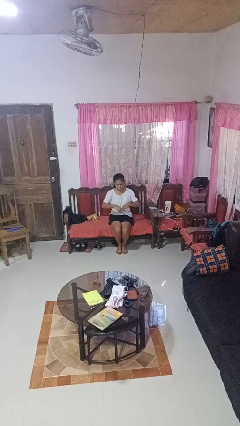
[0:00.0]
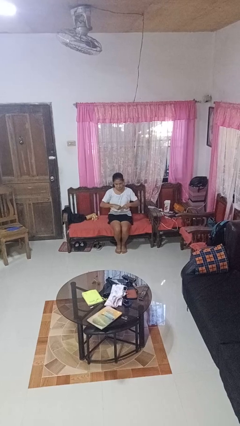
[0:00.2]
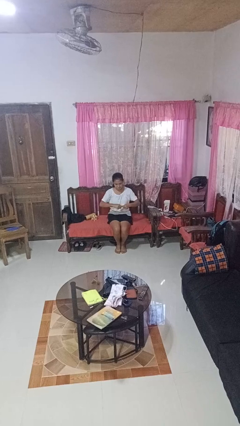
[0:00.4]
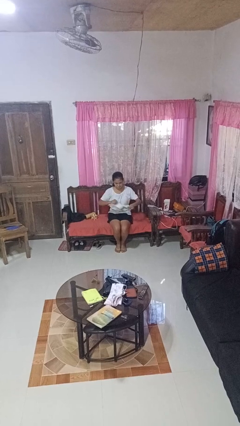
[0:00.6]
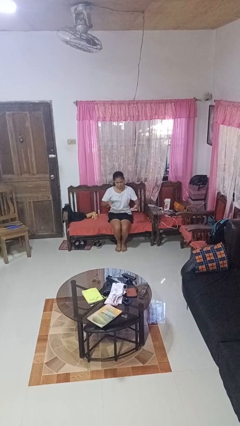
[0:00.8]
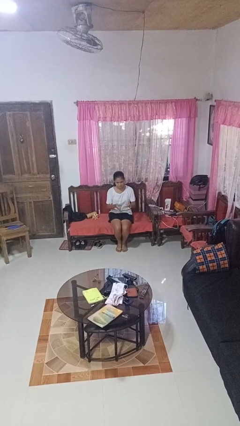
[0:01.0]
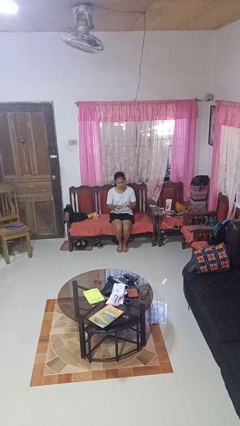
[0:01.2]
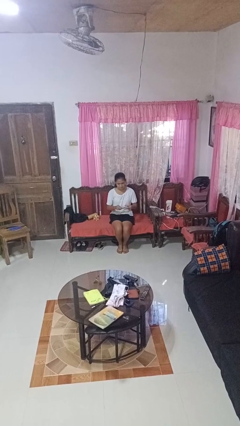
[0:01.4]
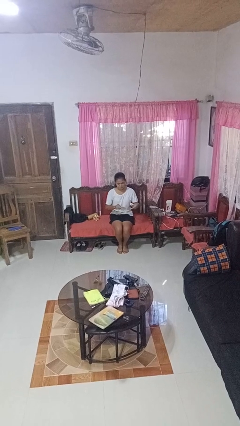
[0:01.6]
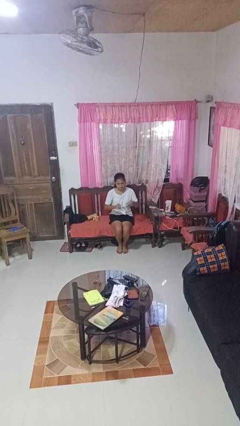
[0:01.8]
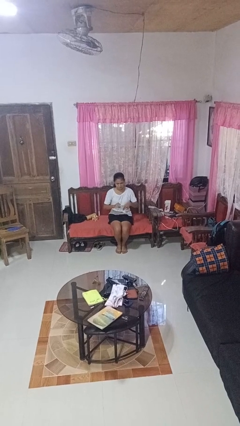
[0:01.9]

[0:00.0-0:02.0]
person tears paper

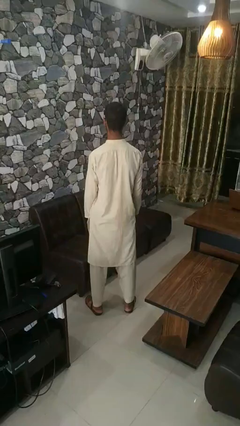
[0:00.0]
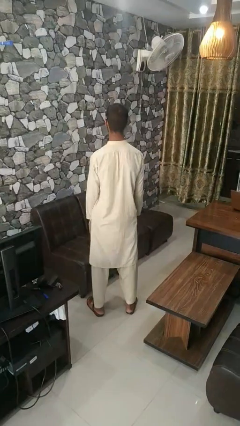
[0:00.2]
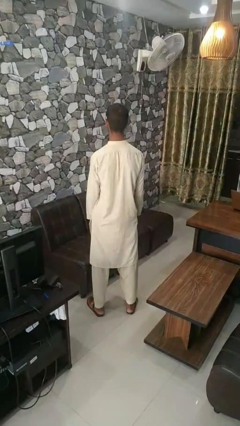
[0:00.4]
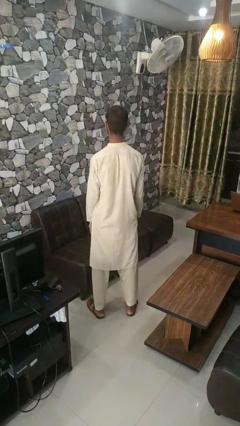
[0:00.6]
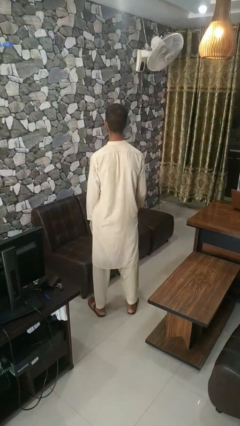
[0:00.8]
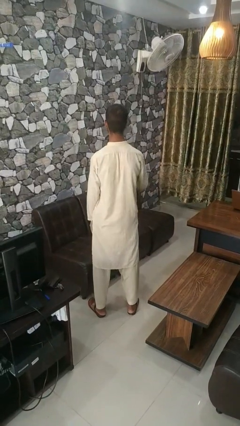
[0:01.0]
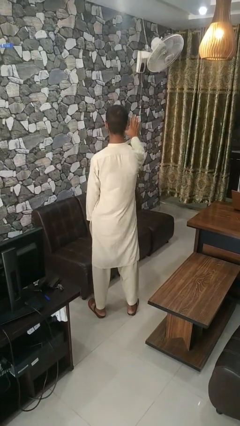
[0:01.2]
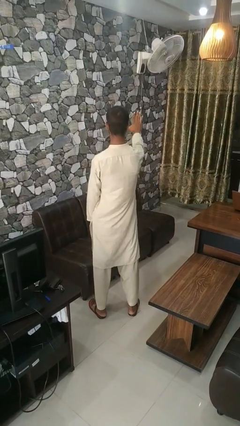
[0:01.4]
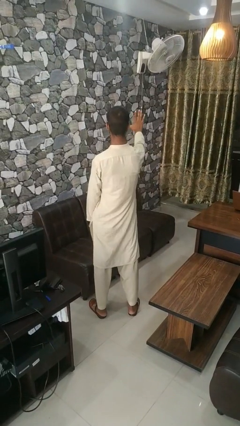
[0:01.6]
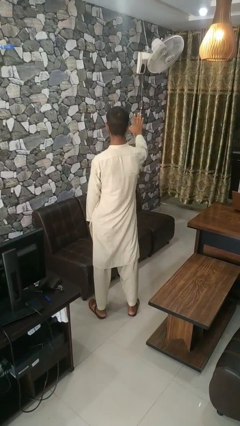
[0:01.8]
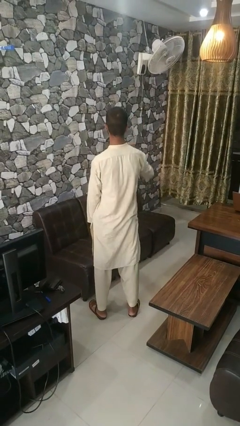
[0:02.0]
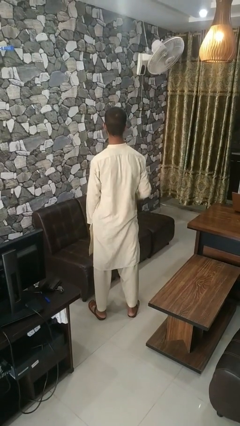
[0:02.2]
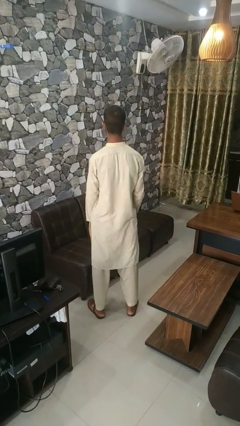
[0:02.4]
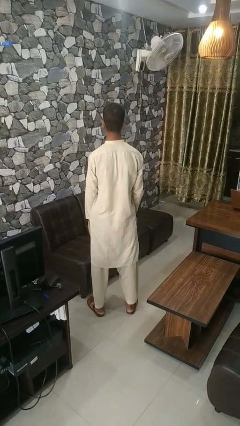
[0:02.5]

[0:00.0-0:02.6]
person gestures number five

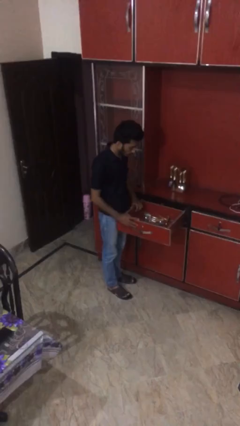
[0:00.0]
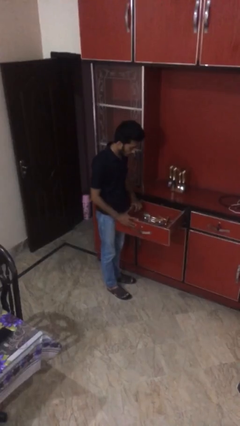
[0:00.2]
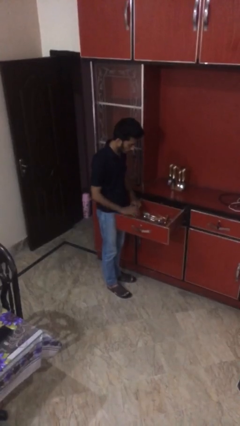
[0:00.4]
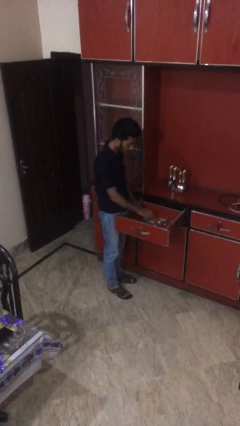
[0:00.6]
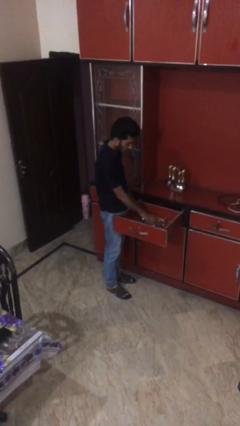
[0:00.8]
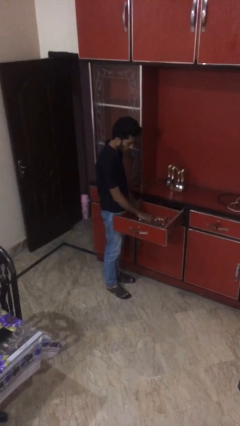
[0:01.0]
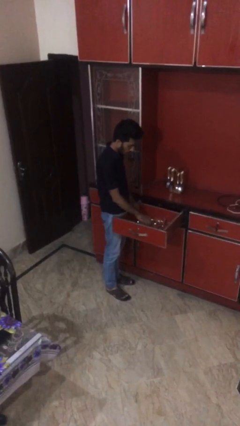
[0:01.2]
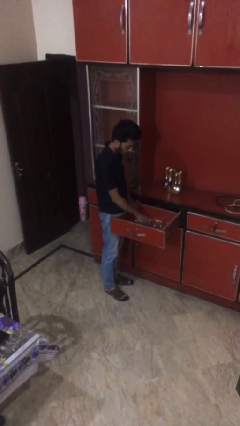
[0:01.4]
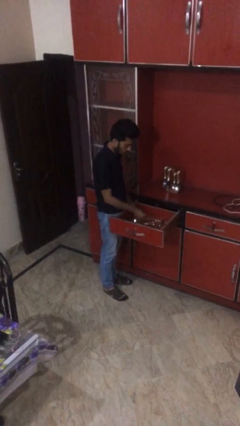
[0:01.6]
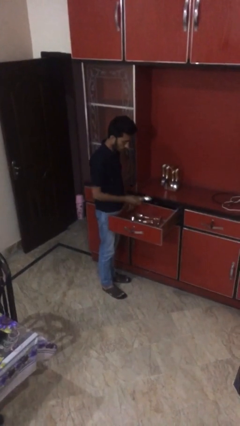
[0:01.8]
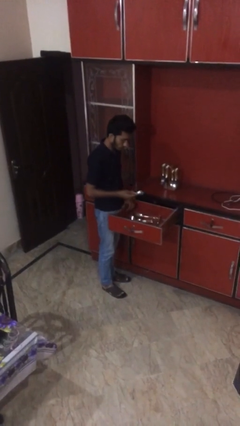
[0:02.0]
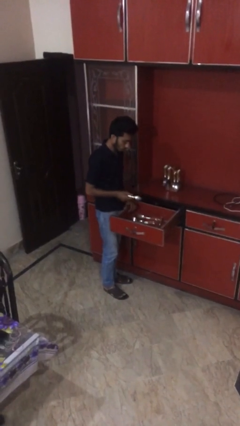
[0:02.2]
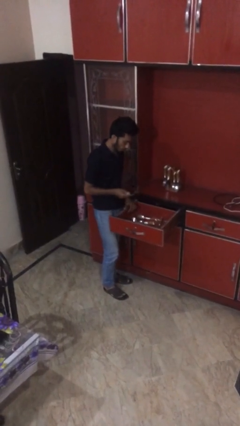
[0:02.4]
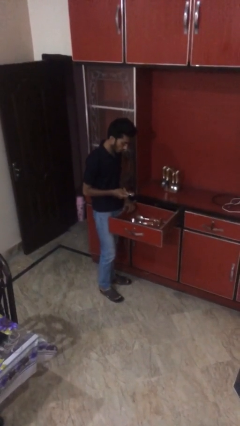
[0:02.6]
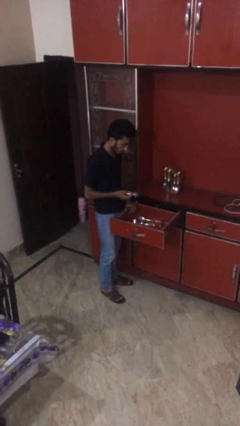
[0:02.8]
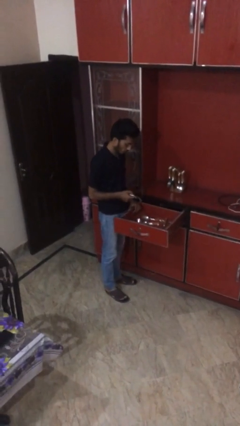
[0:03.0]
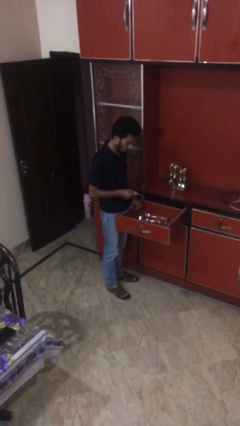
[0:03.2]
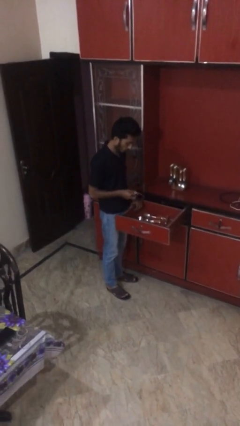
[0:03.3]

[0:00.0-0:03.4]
person takes object from kitchen drawer

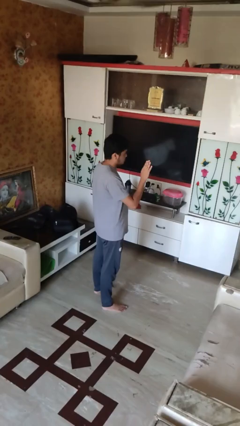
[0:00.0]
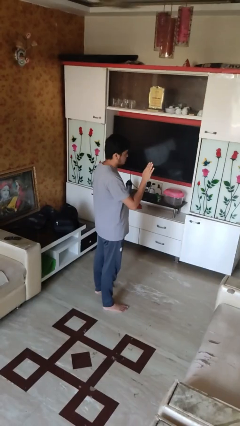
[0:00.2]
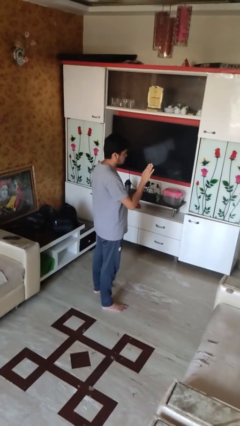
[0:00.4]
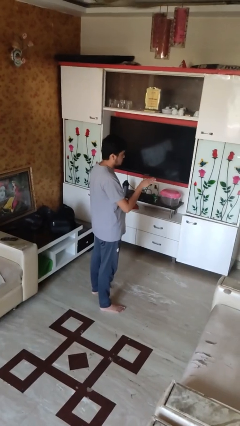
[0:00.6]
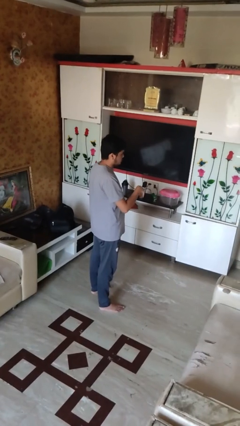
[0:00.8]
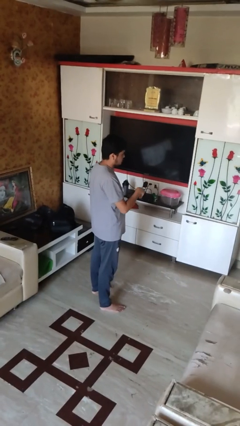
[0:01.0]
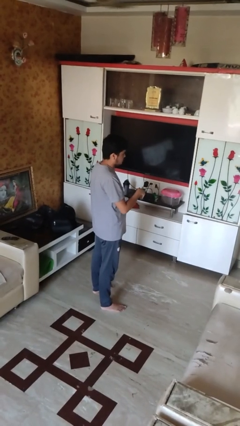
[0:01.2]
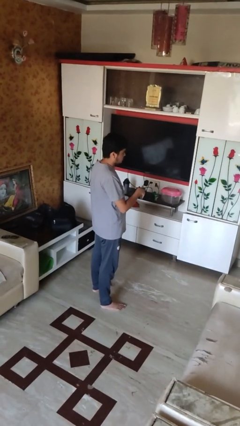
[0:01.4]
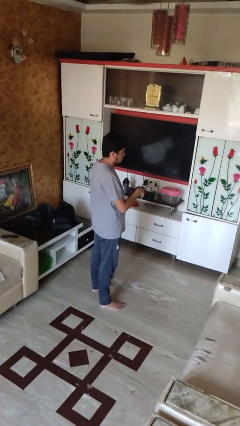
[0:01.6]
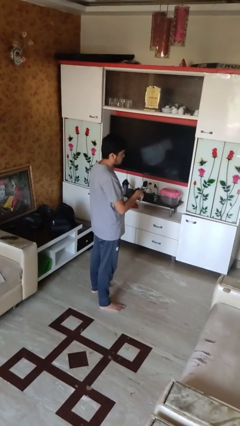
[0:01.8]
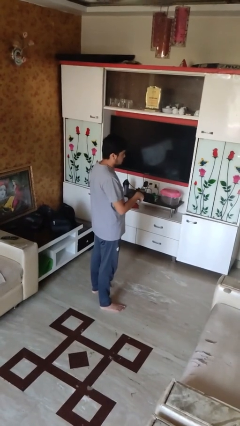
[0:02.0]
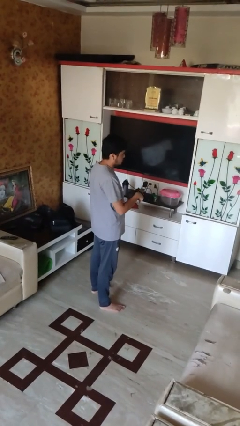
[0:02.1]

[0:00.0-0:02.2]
person gestures swipe down

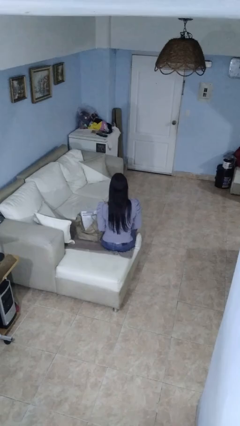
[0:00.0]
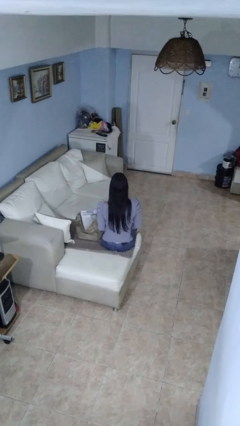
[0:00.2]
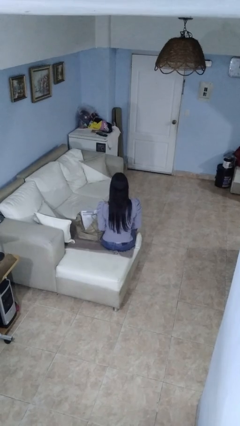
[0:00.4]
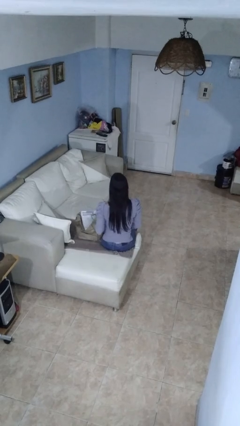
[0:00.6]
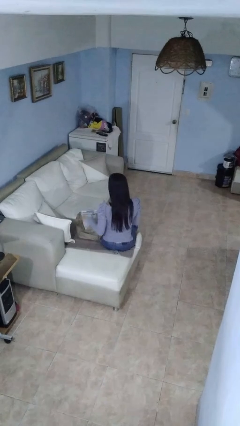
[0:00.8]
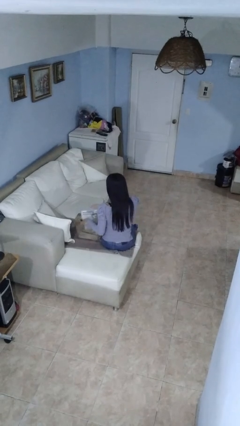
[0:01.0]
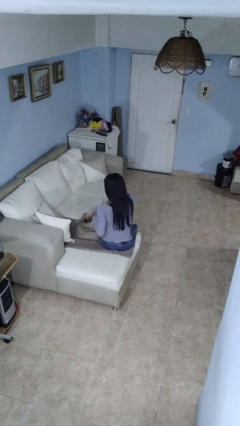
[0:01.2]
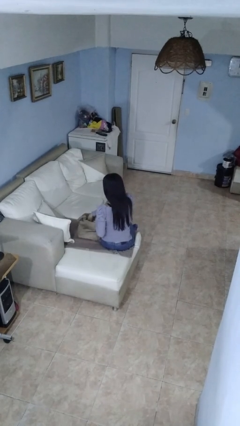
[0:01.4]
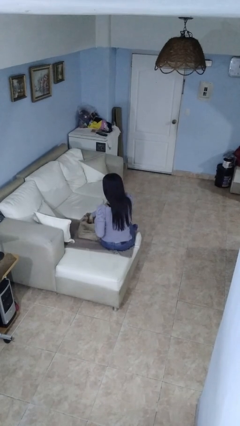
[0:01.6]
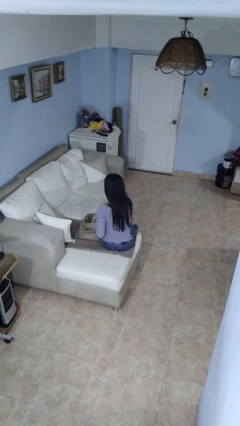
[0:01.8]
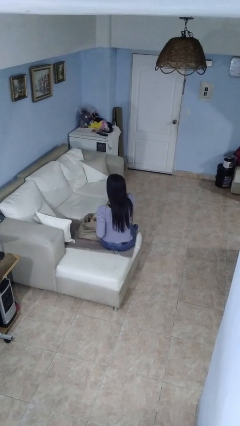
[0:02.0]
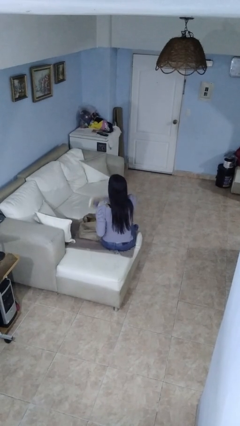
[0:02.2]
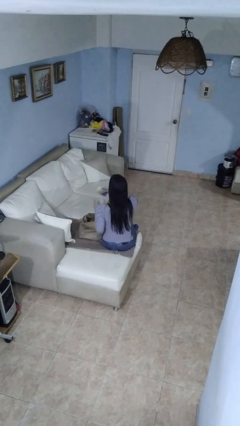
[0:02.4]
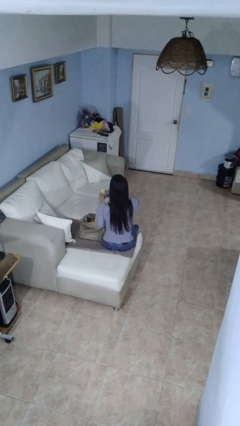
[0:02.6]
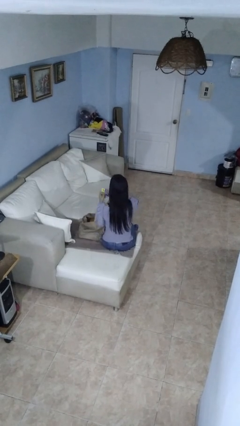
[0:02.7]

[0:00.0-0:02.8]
person takes object from bag

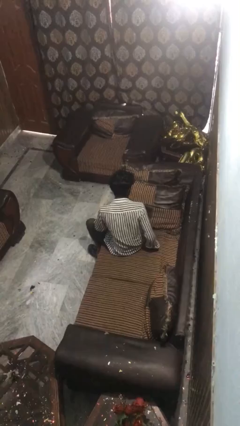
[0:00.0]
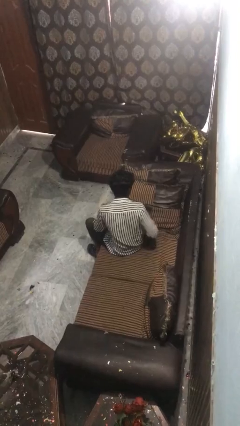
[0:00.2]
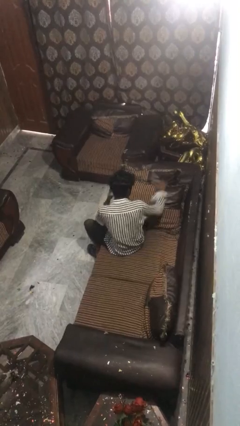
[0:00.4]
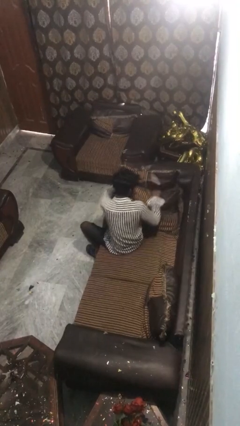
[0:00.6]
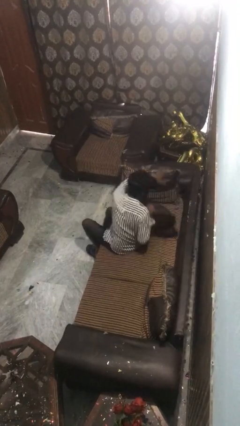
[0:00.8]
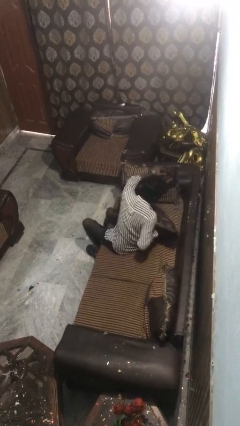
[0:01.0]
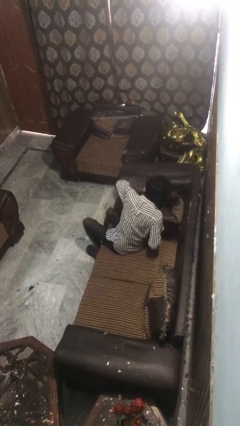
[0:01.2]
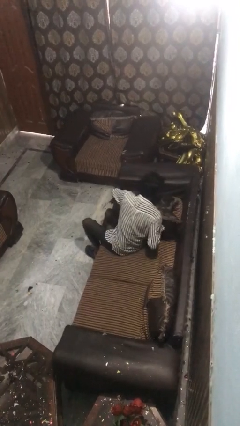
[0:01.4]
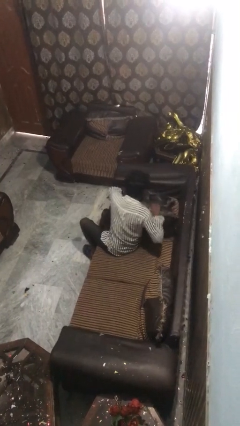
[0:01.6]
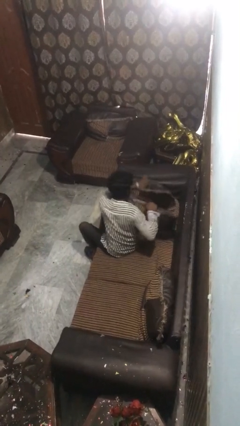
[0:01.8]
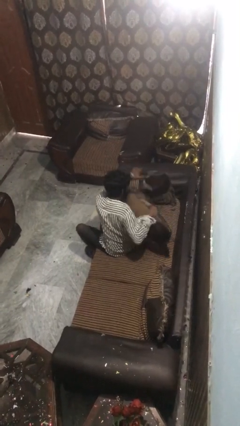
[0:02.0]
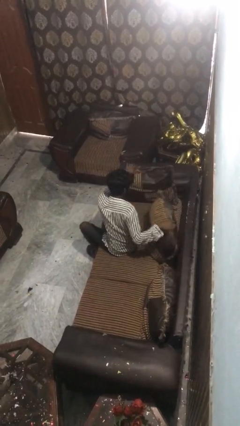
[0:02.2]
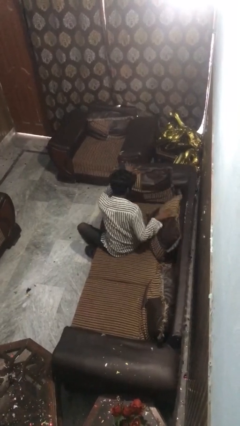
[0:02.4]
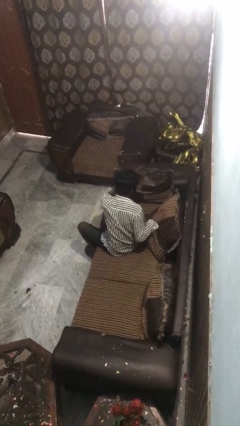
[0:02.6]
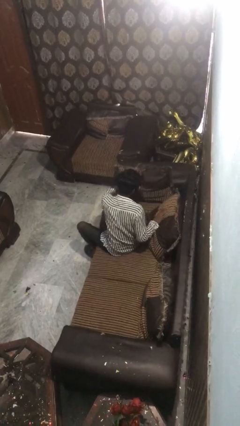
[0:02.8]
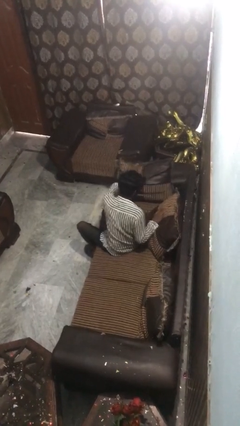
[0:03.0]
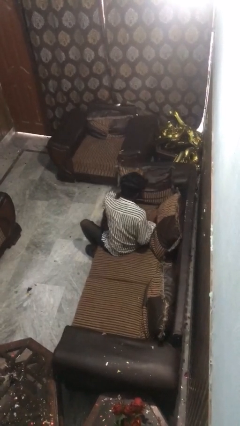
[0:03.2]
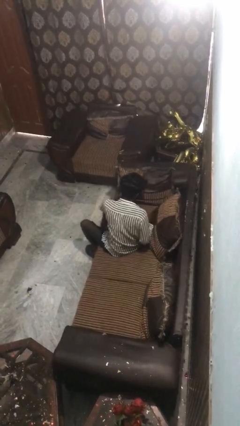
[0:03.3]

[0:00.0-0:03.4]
person searches in couch

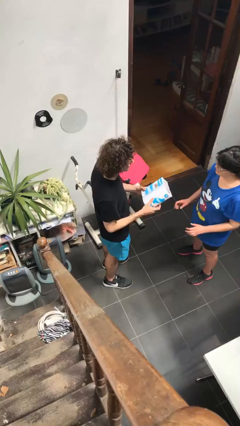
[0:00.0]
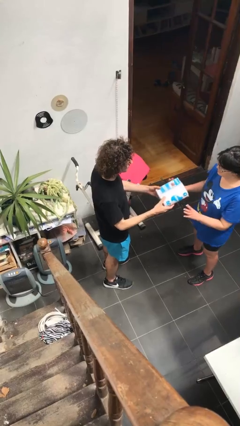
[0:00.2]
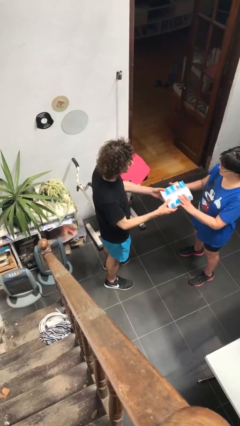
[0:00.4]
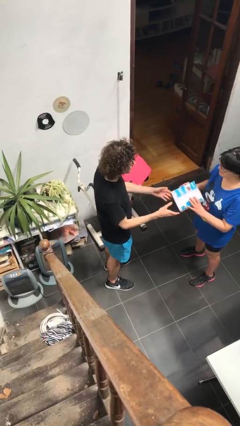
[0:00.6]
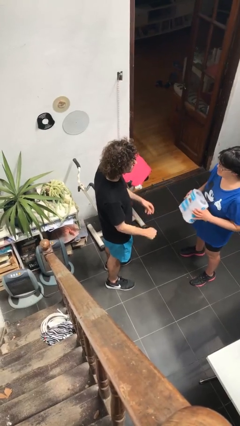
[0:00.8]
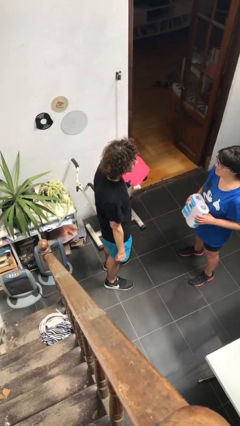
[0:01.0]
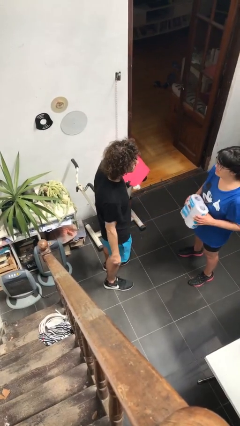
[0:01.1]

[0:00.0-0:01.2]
person transfers object to person
